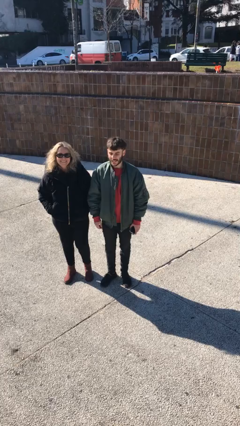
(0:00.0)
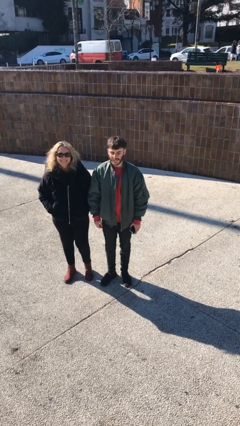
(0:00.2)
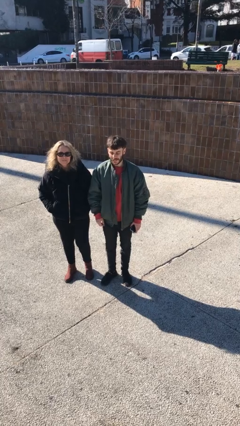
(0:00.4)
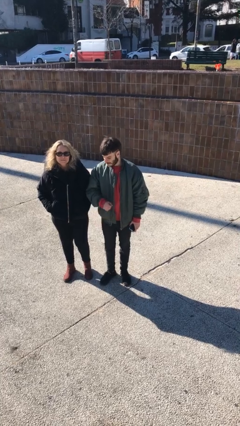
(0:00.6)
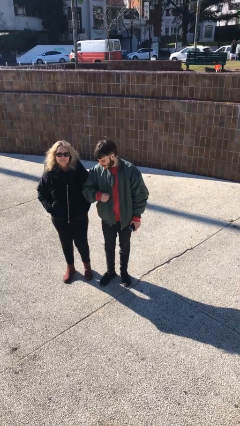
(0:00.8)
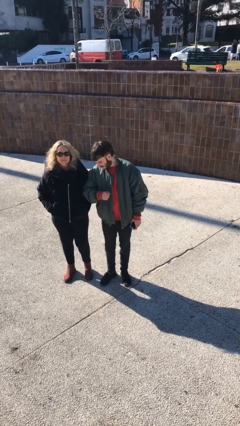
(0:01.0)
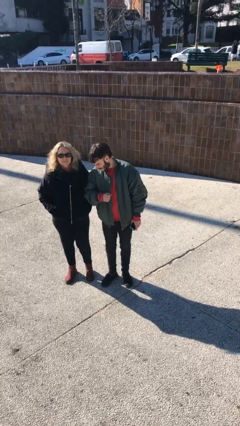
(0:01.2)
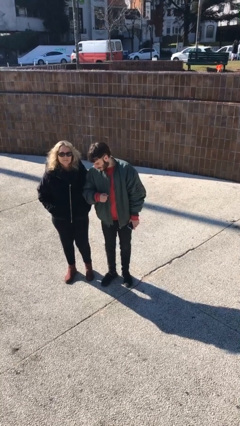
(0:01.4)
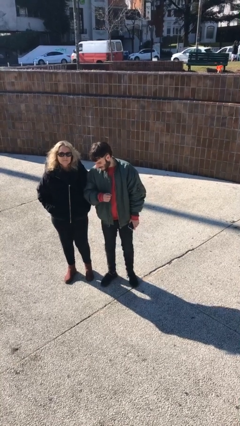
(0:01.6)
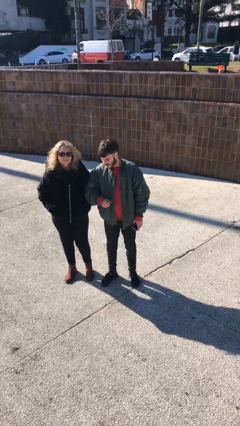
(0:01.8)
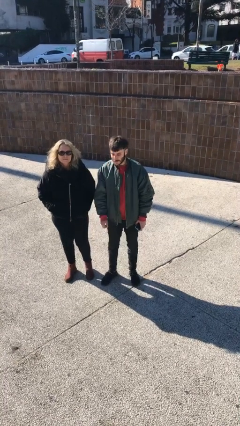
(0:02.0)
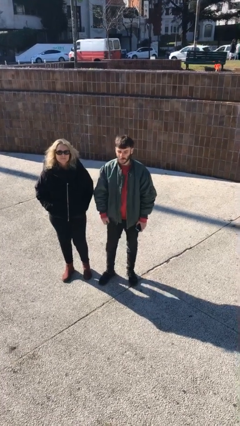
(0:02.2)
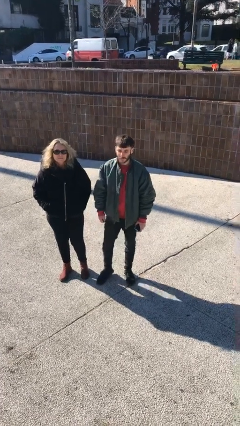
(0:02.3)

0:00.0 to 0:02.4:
person nudges person with elbow

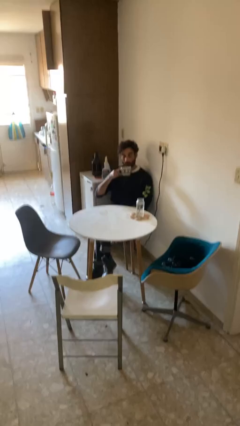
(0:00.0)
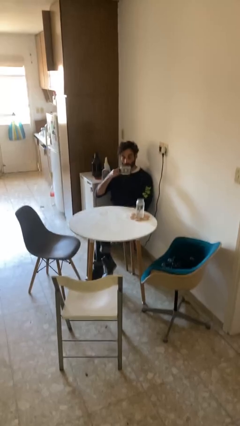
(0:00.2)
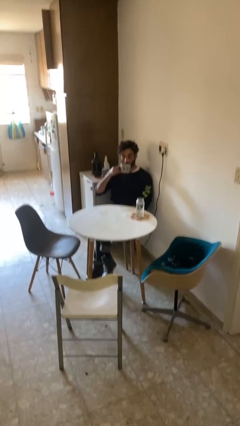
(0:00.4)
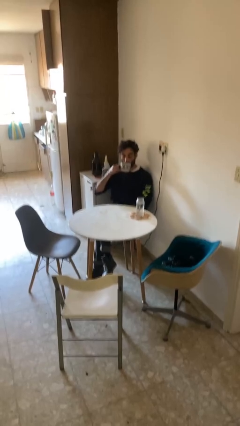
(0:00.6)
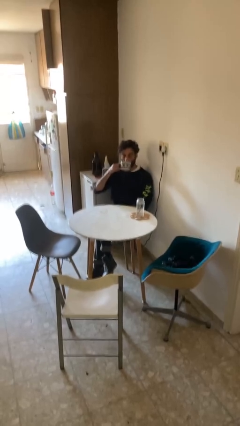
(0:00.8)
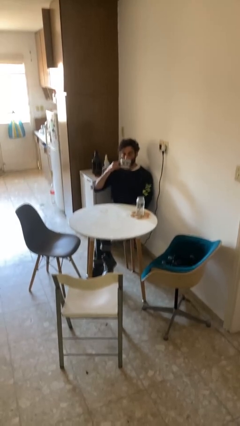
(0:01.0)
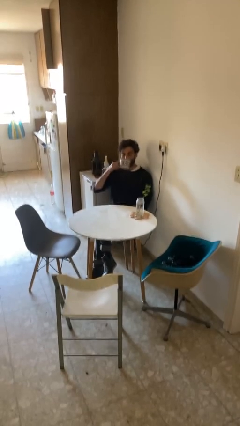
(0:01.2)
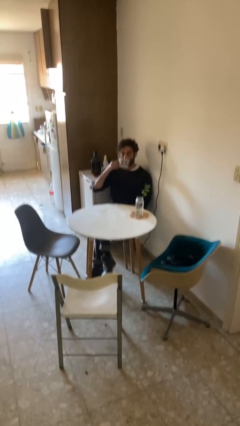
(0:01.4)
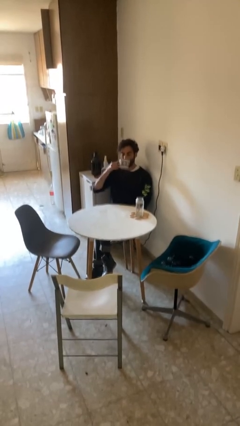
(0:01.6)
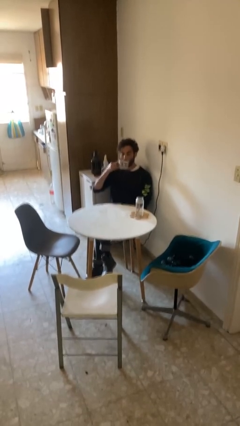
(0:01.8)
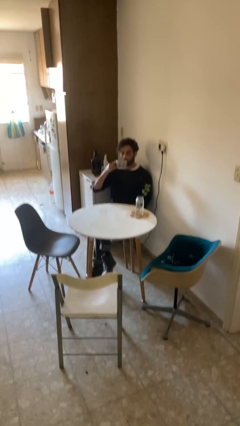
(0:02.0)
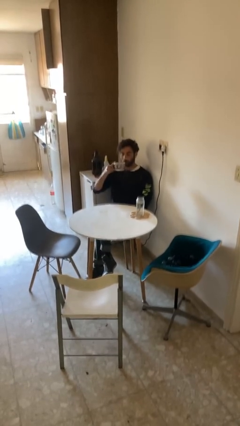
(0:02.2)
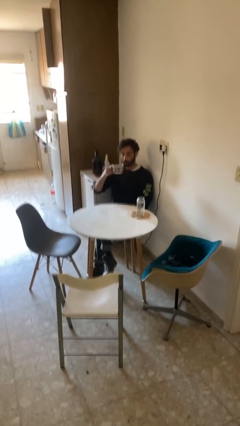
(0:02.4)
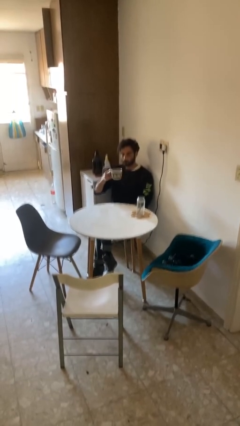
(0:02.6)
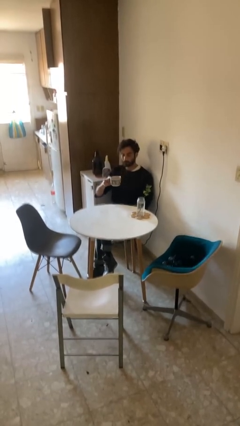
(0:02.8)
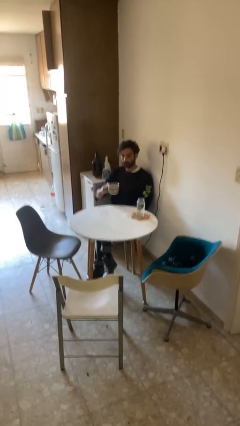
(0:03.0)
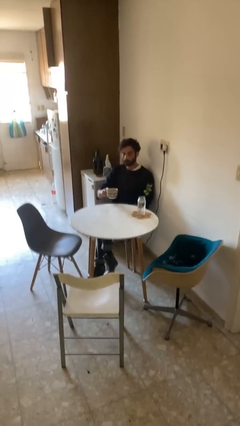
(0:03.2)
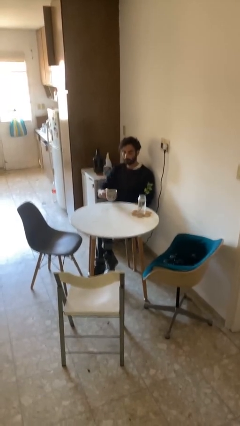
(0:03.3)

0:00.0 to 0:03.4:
person drinks from mug

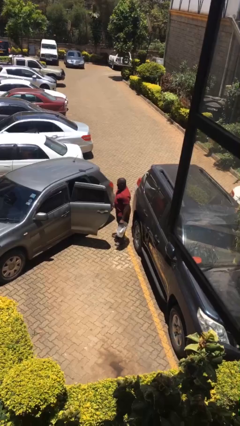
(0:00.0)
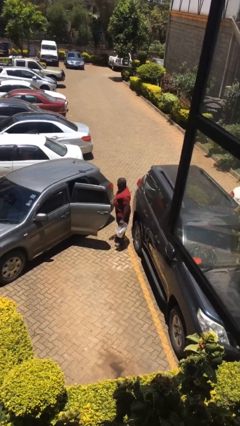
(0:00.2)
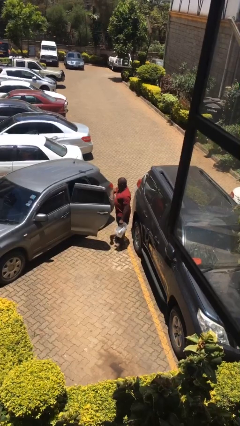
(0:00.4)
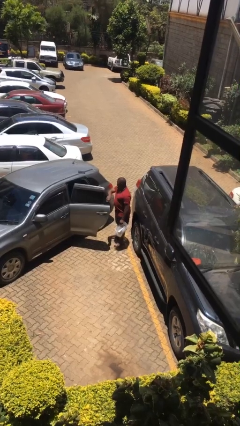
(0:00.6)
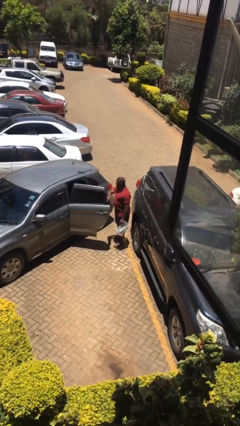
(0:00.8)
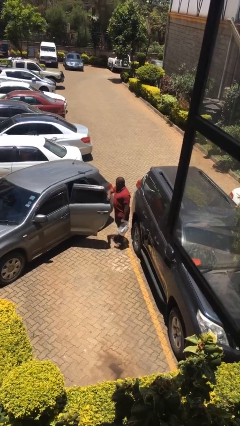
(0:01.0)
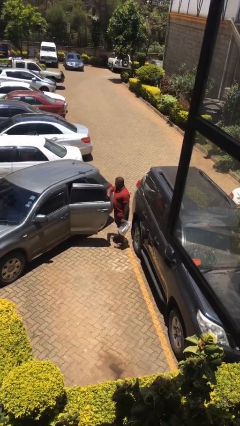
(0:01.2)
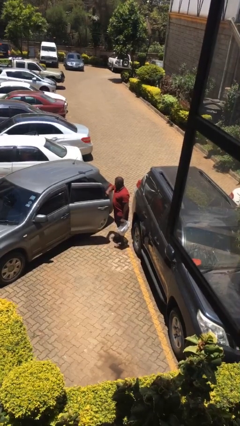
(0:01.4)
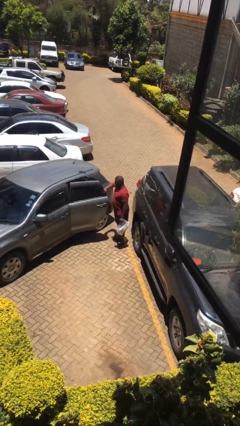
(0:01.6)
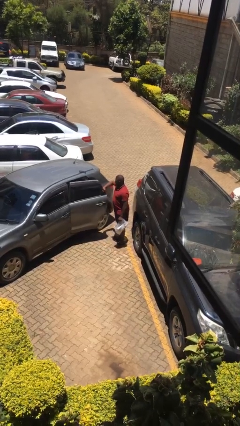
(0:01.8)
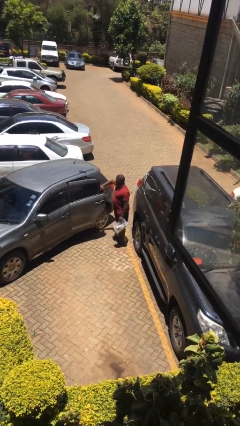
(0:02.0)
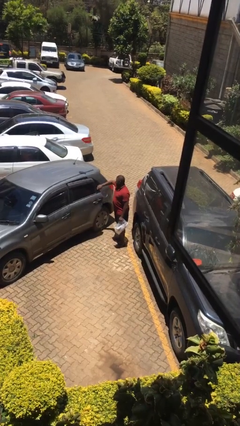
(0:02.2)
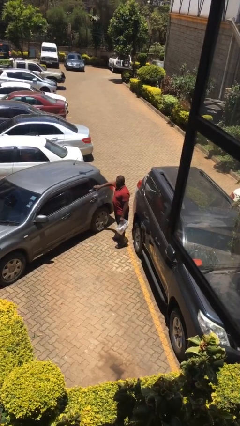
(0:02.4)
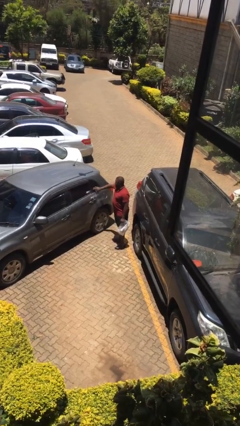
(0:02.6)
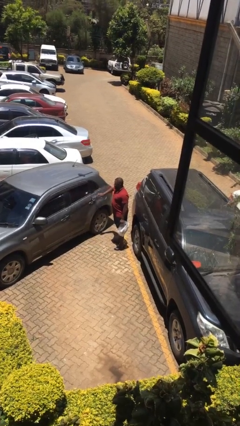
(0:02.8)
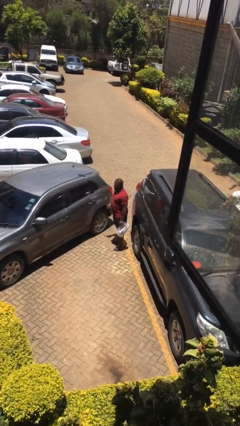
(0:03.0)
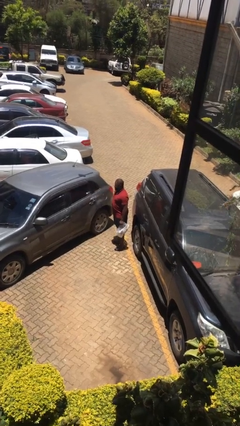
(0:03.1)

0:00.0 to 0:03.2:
person closes car door

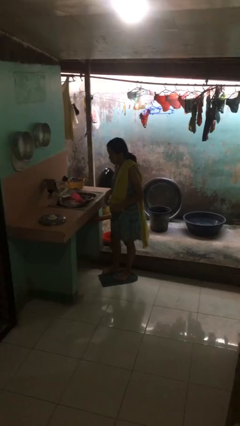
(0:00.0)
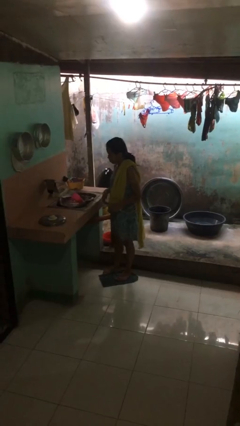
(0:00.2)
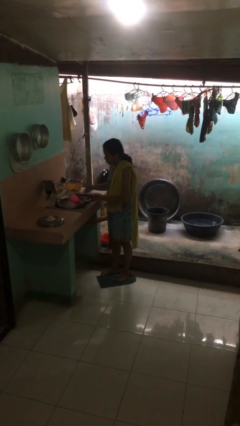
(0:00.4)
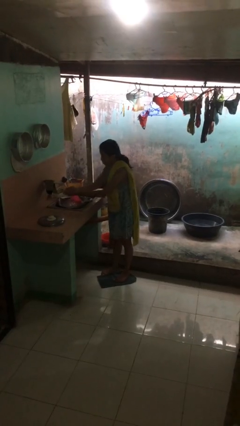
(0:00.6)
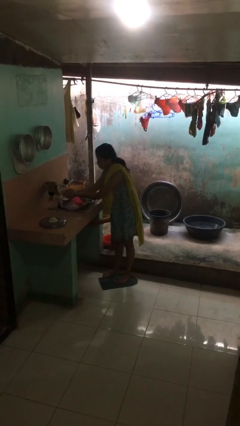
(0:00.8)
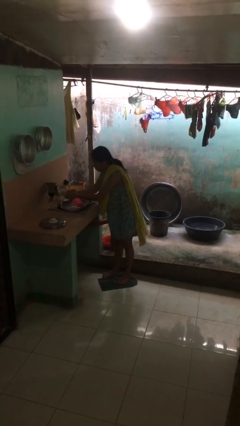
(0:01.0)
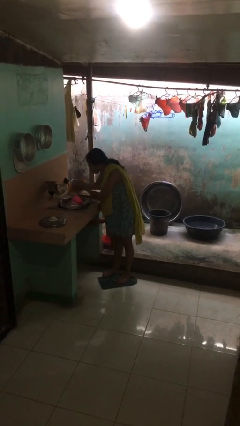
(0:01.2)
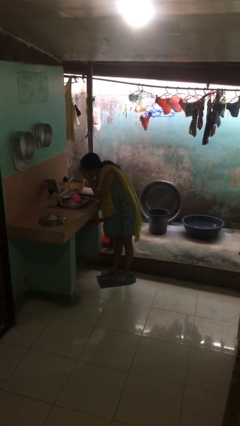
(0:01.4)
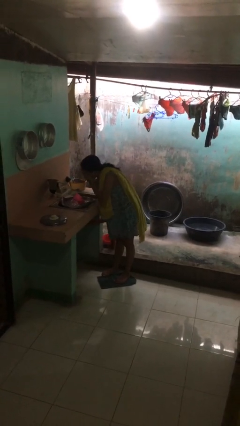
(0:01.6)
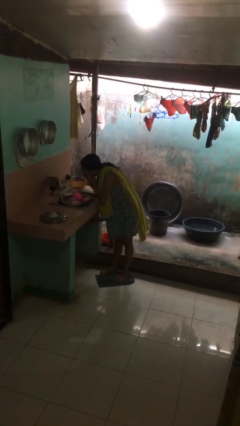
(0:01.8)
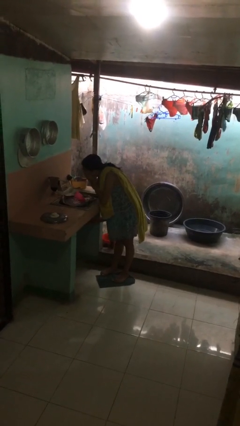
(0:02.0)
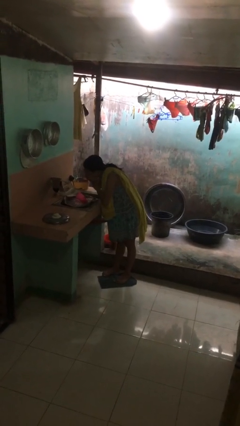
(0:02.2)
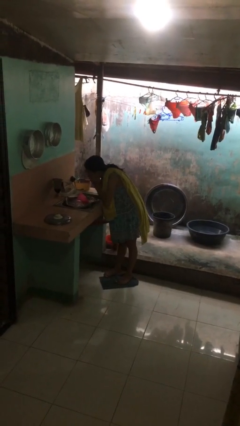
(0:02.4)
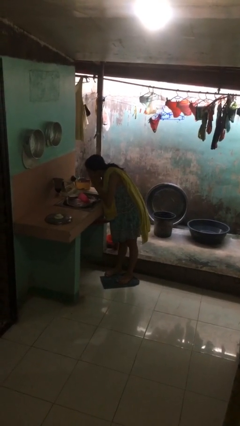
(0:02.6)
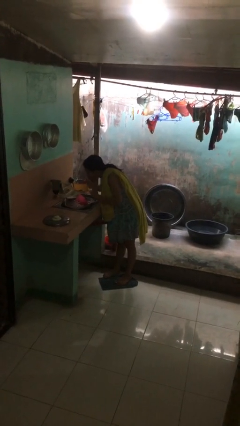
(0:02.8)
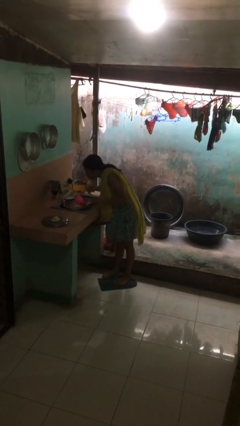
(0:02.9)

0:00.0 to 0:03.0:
person washes face

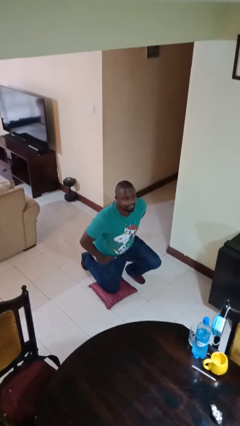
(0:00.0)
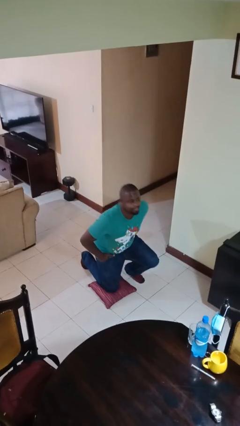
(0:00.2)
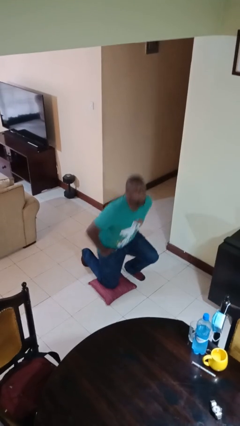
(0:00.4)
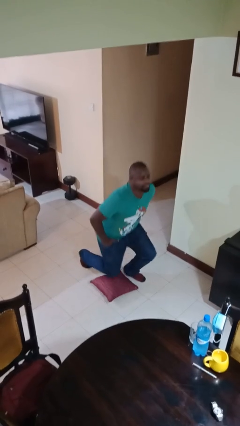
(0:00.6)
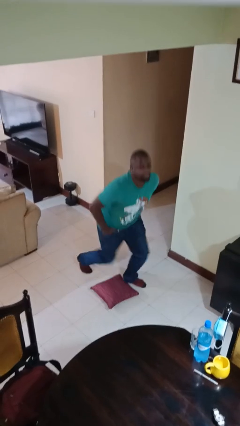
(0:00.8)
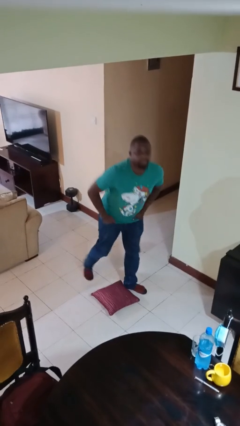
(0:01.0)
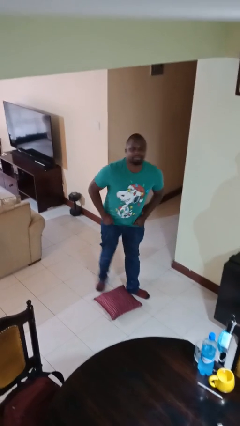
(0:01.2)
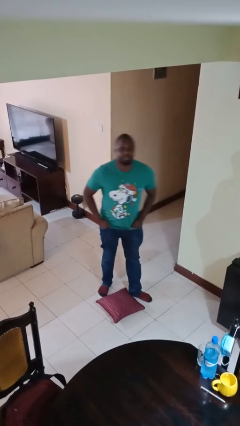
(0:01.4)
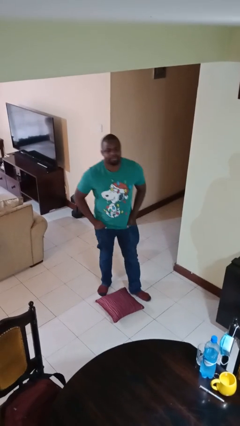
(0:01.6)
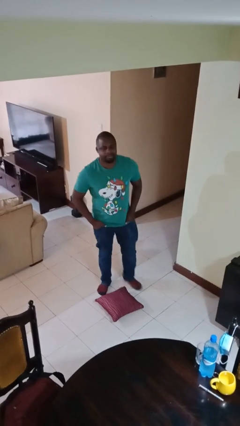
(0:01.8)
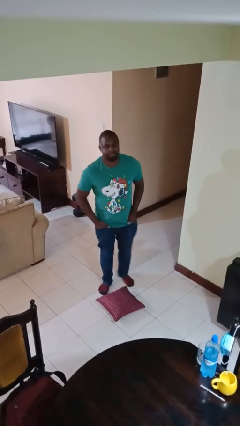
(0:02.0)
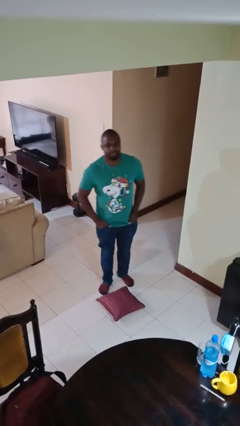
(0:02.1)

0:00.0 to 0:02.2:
person stands up from floor

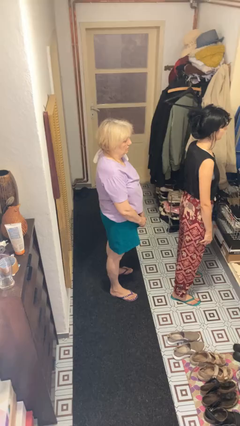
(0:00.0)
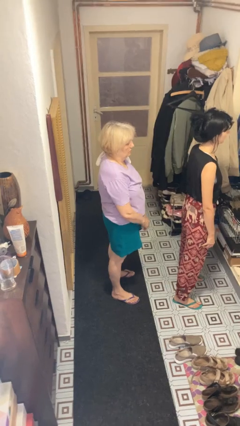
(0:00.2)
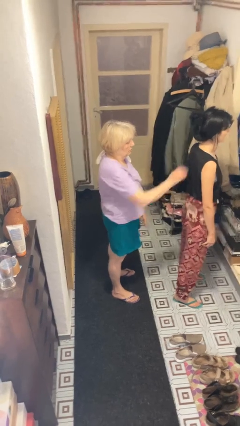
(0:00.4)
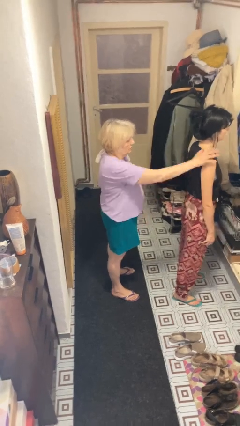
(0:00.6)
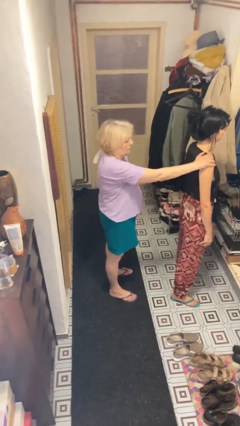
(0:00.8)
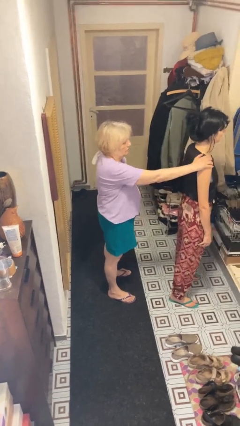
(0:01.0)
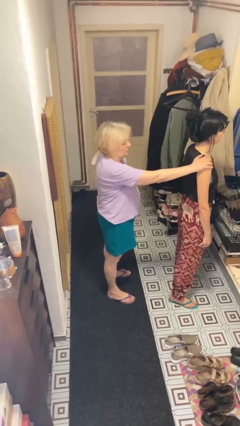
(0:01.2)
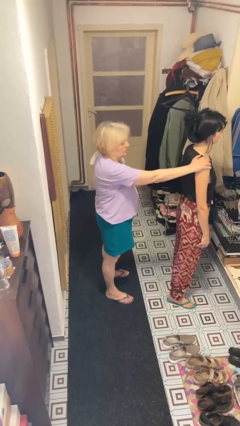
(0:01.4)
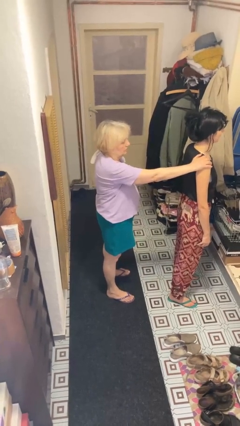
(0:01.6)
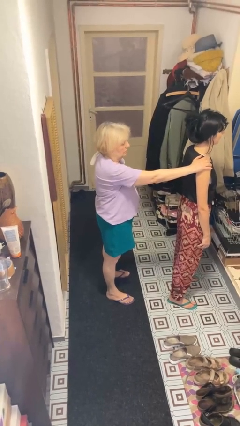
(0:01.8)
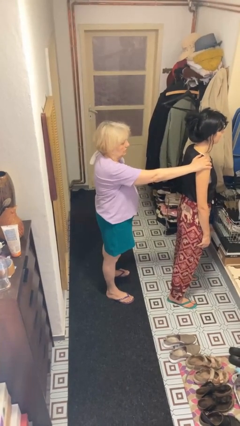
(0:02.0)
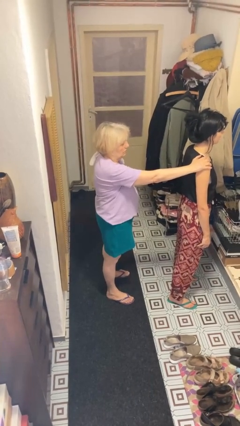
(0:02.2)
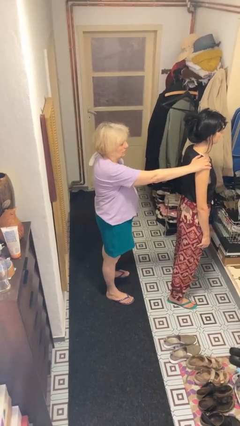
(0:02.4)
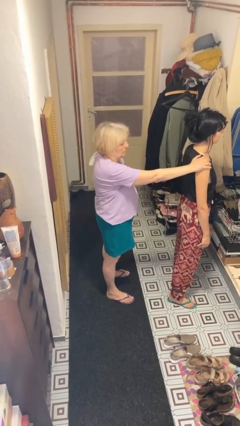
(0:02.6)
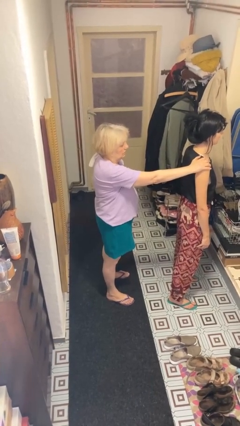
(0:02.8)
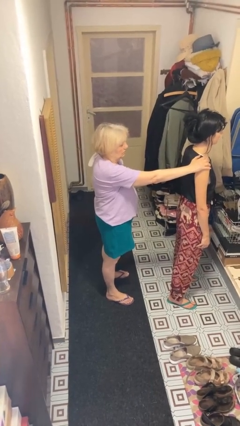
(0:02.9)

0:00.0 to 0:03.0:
person grabs person by shoulder
